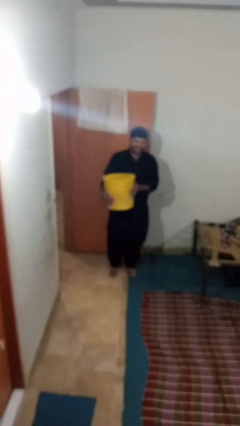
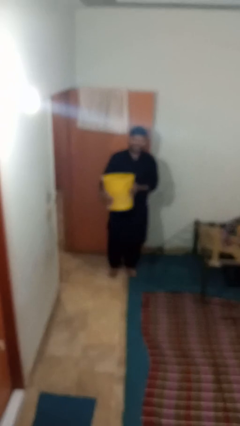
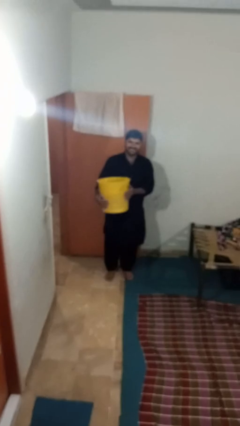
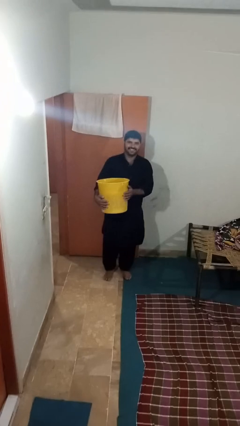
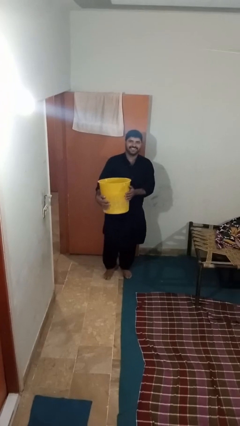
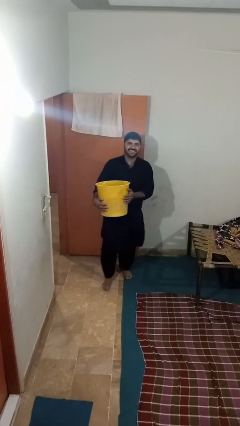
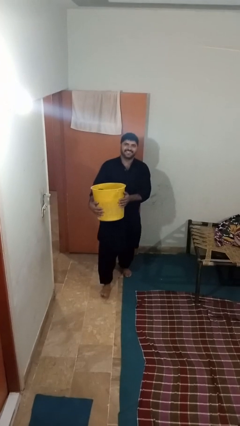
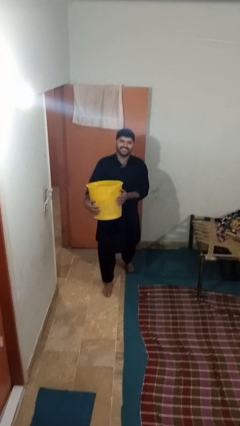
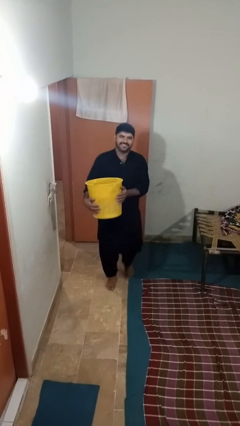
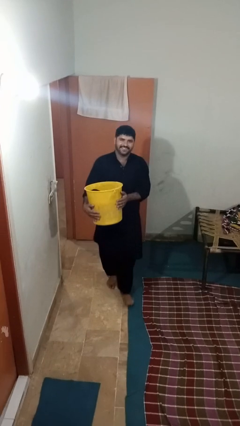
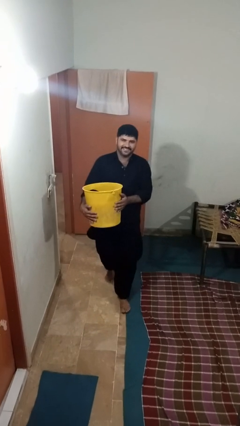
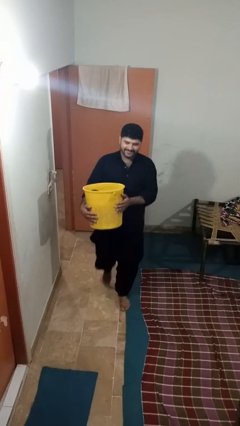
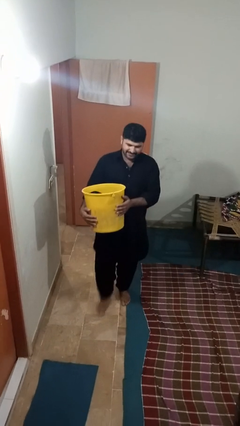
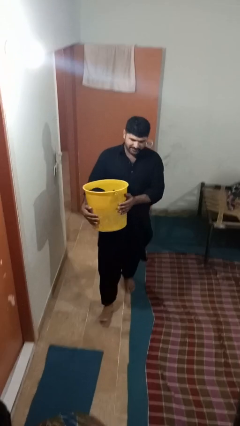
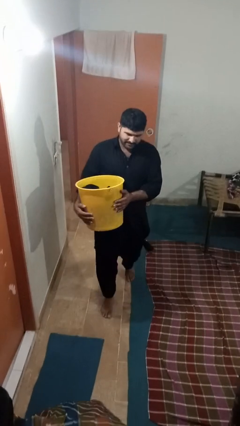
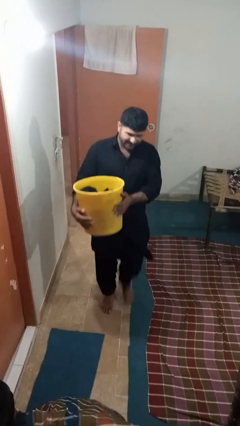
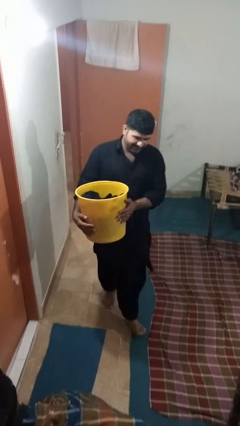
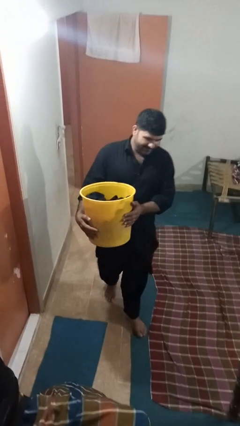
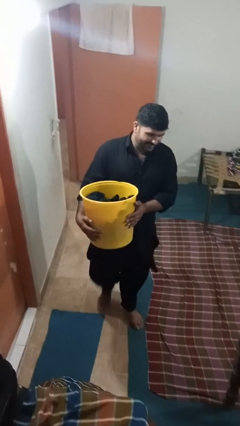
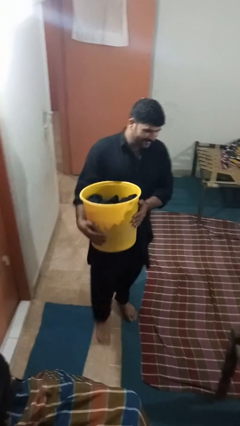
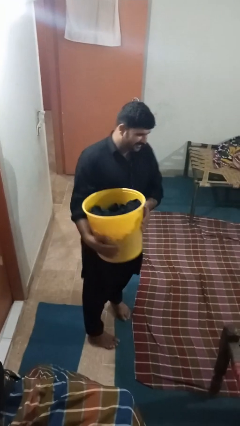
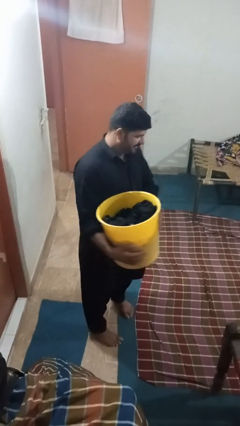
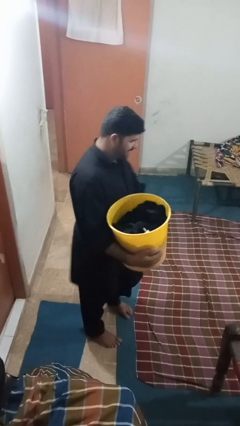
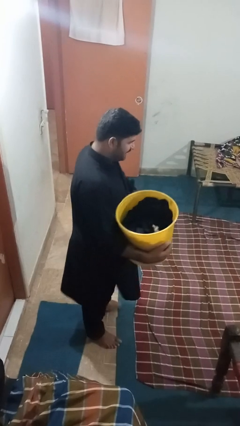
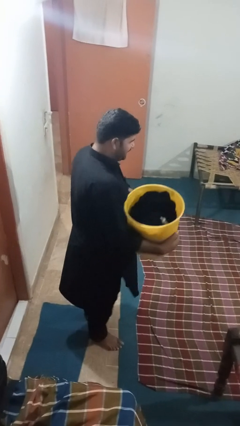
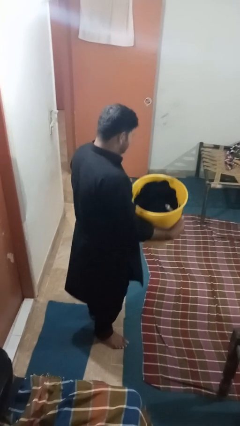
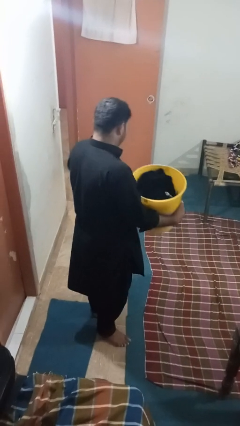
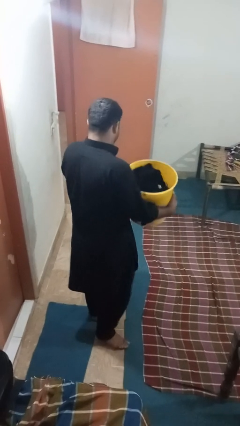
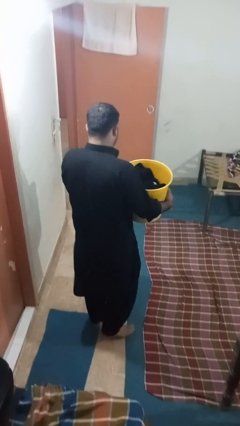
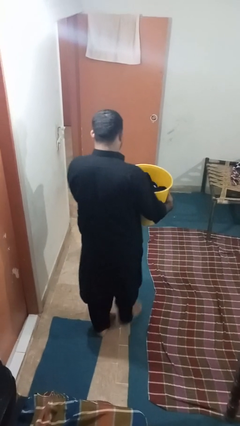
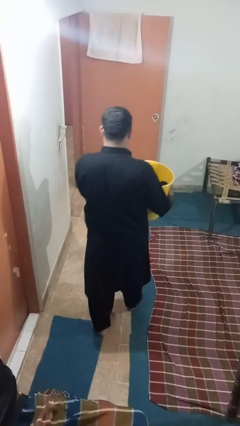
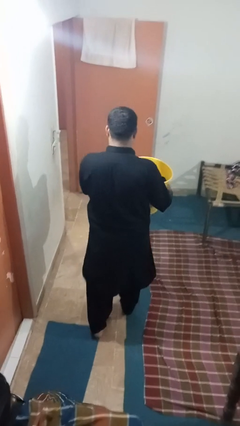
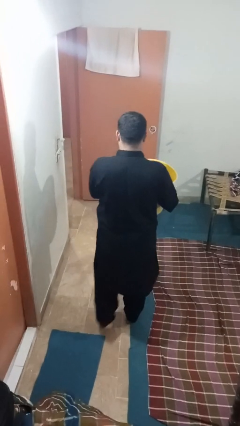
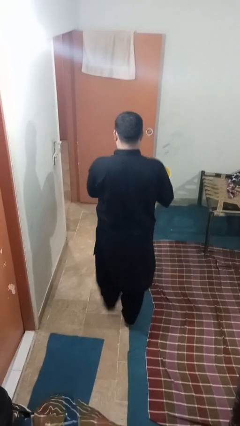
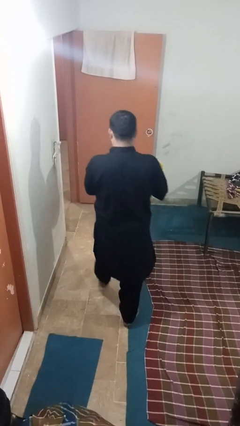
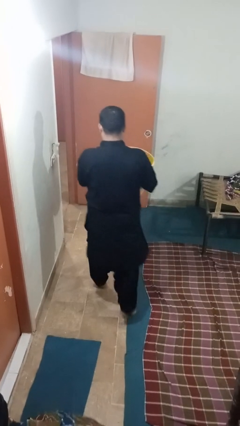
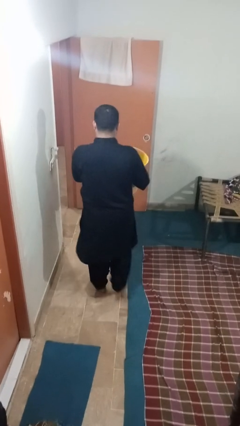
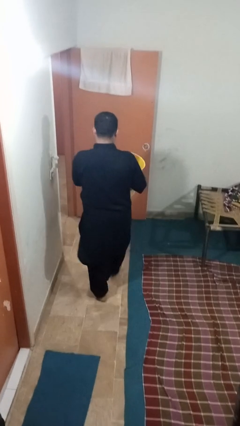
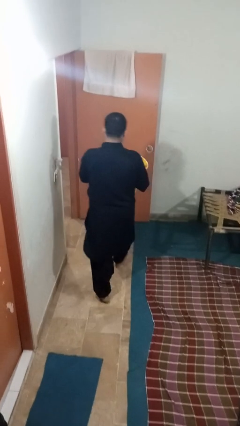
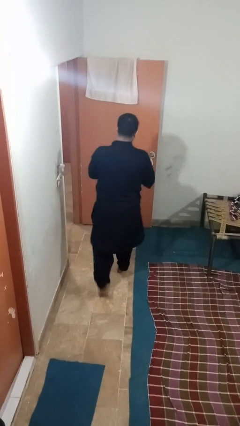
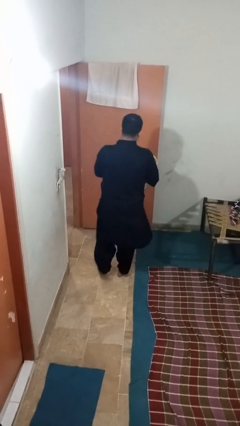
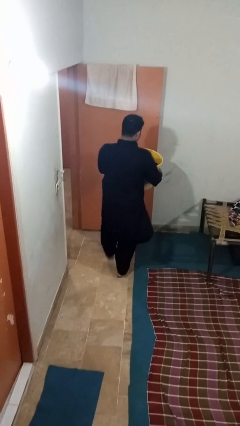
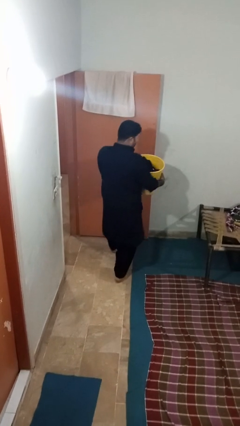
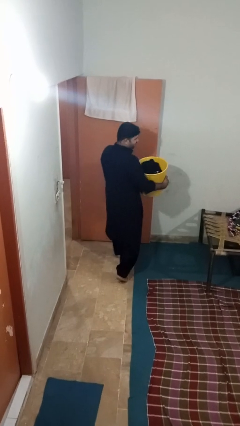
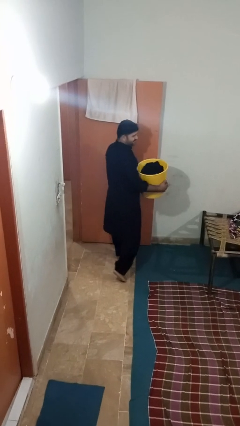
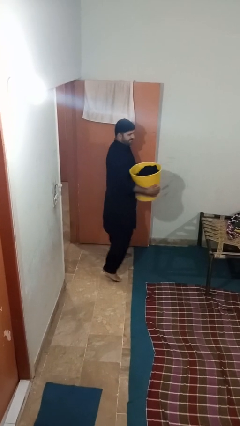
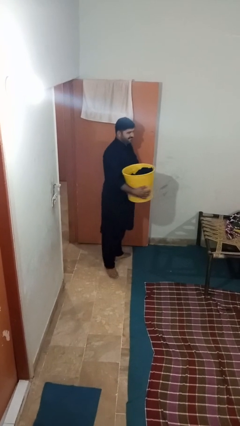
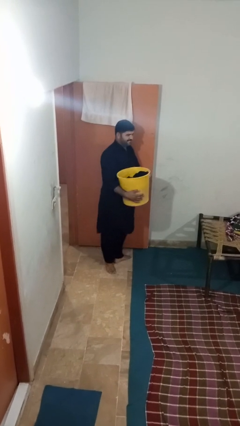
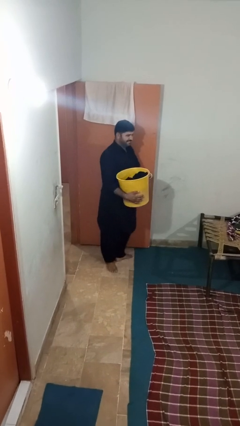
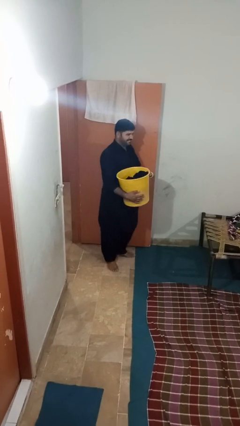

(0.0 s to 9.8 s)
person carries laundry basket

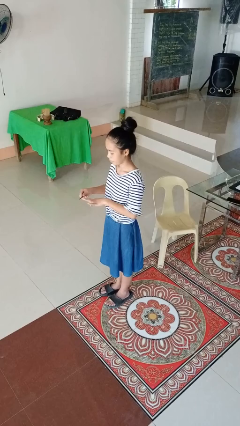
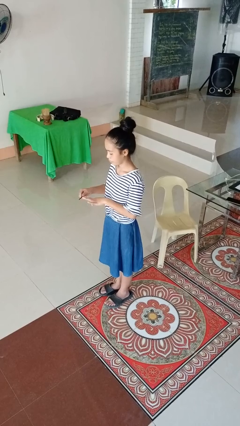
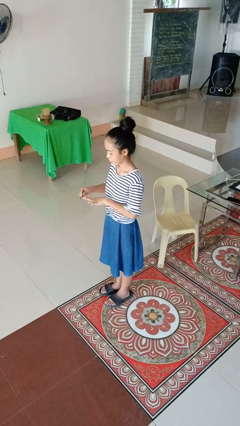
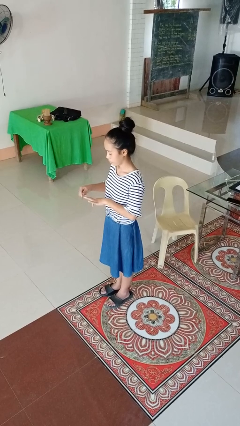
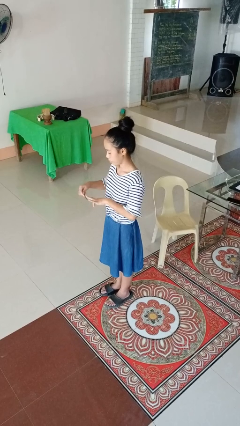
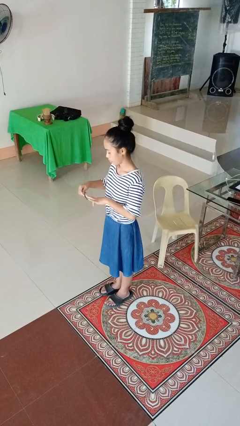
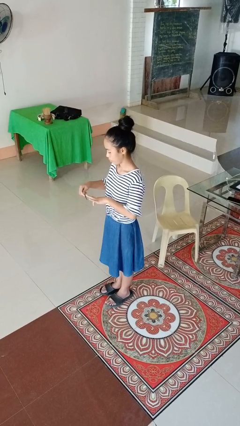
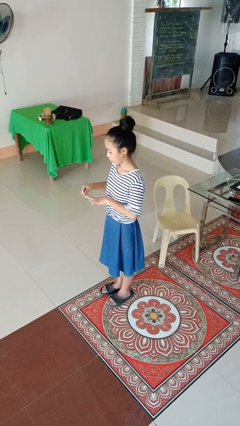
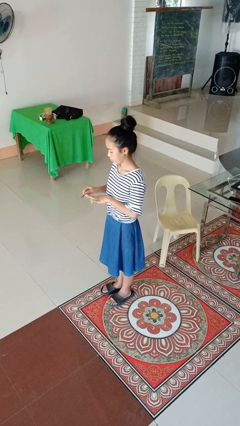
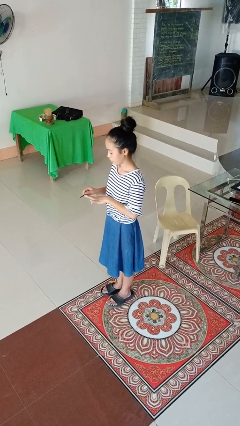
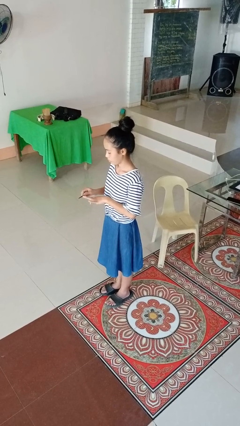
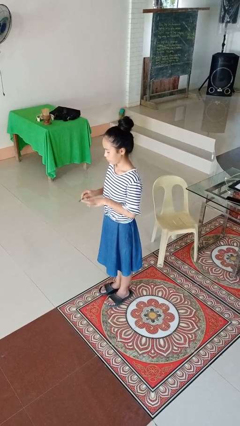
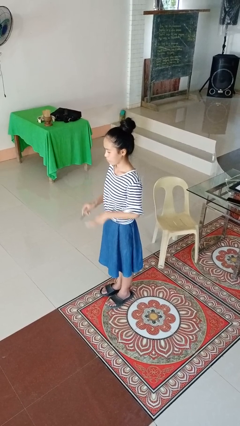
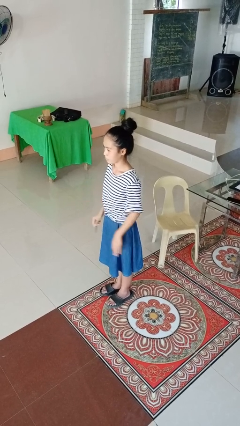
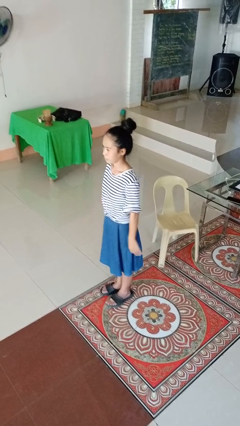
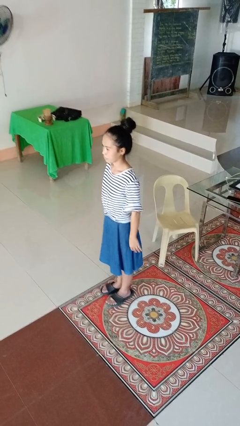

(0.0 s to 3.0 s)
person files fingernails

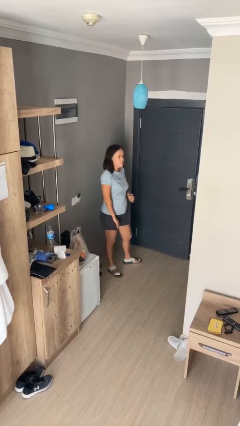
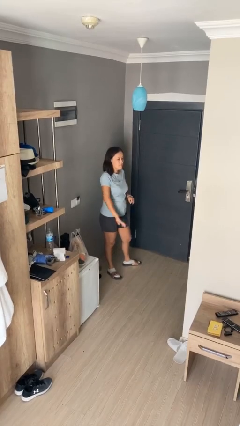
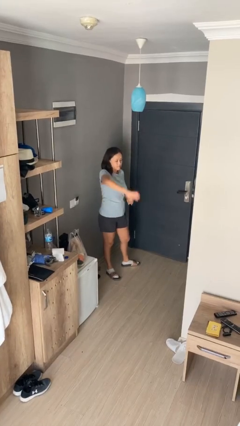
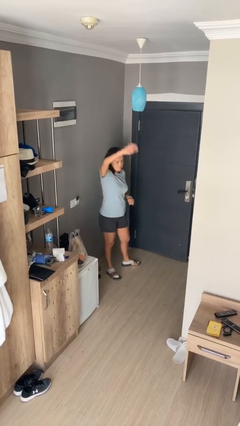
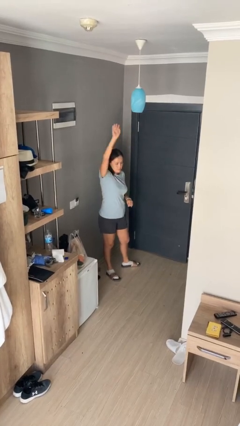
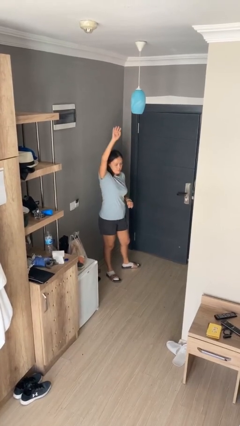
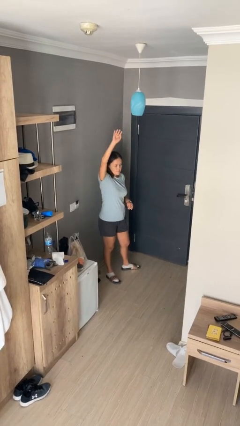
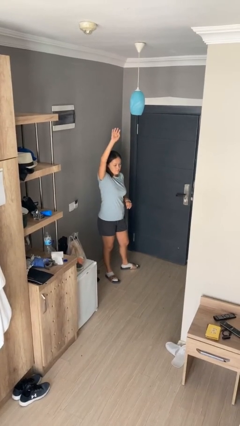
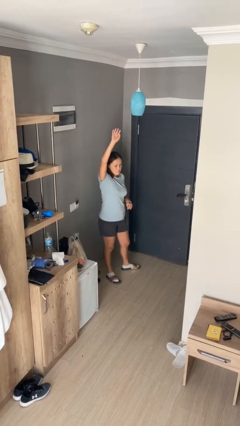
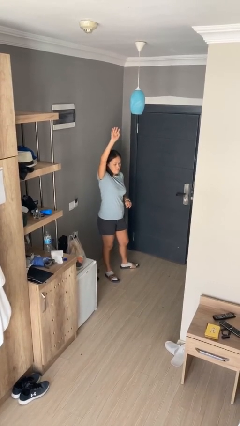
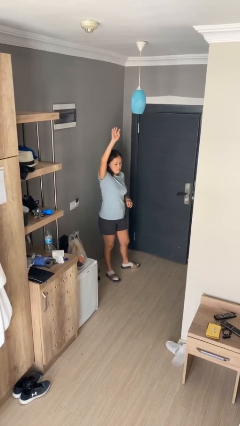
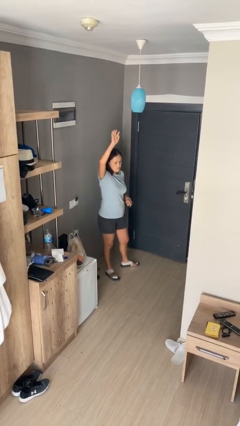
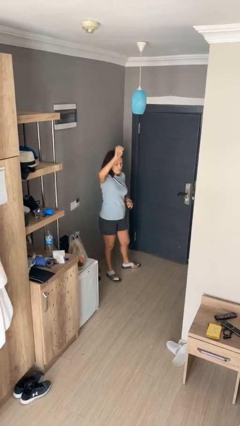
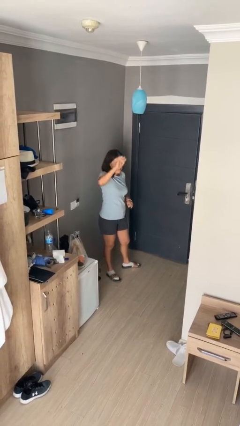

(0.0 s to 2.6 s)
person gestures swipe up

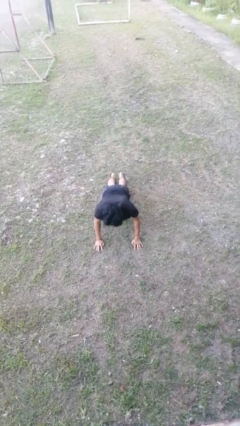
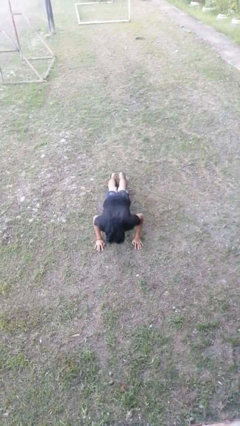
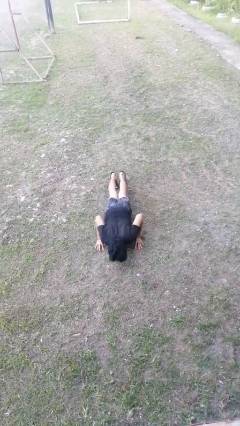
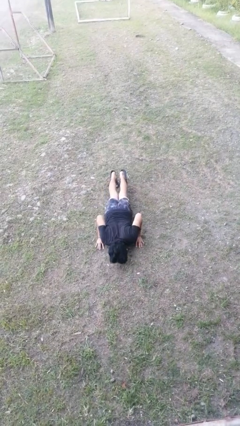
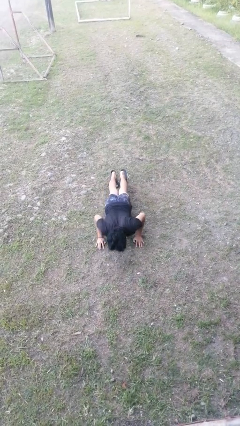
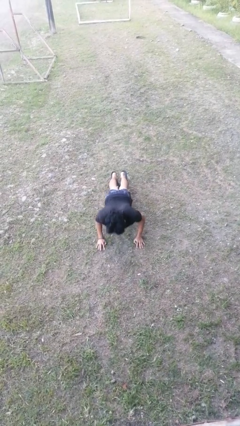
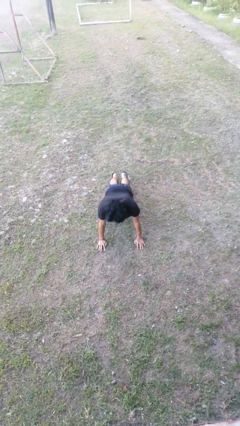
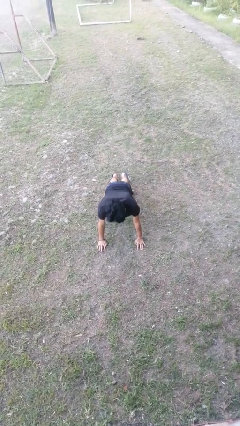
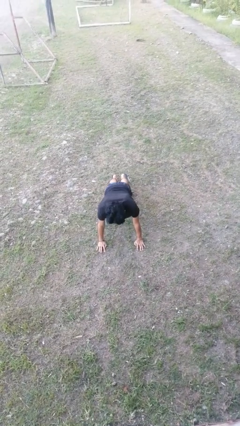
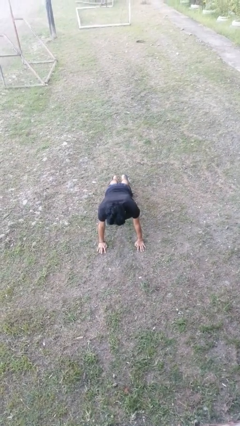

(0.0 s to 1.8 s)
person exercises with pushup

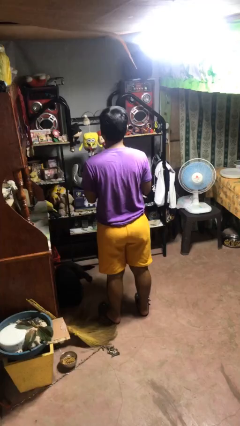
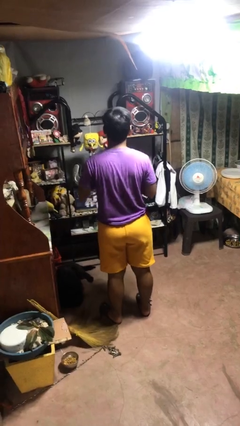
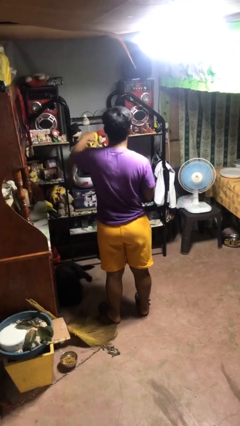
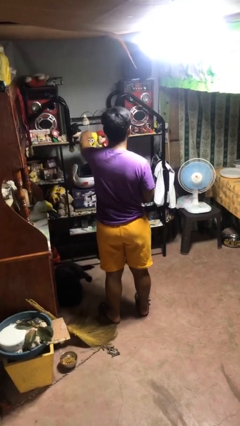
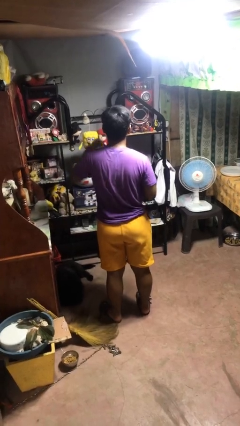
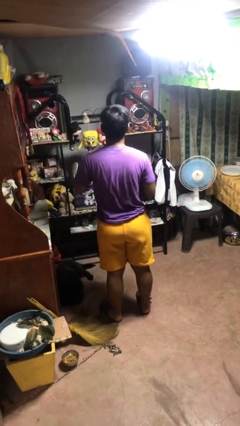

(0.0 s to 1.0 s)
person punches
